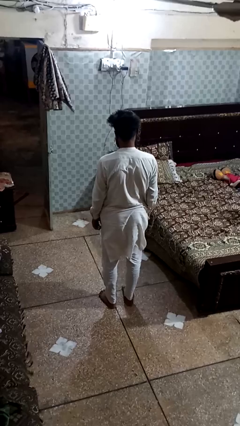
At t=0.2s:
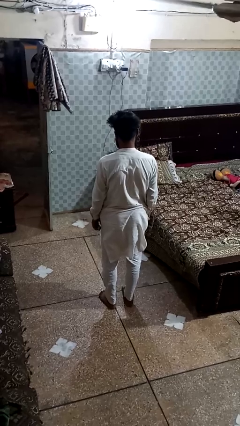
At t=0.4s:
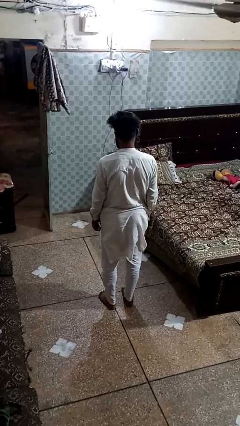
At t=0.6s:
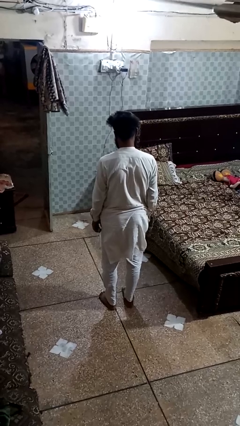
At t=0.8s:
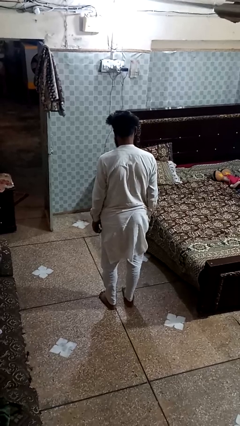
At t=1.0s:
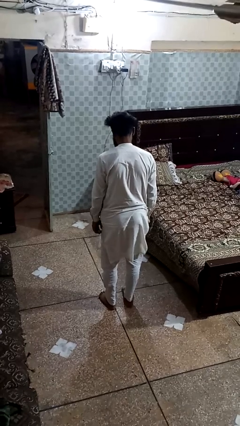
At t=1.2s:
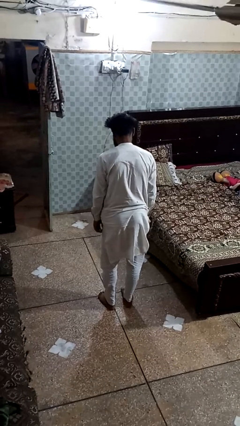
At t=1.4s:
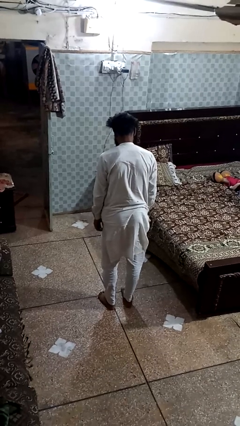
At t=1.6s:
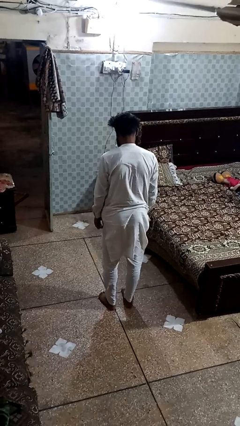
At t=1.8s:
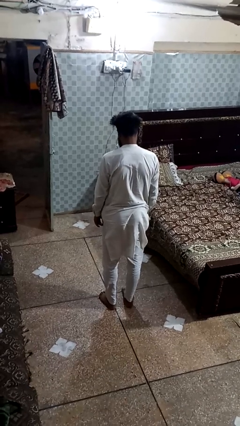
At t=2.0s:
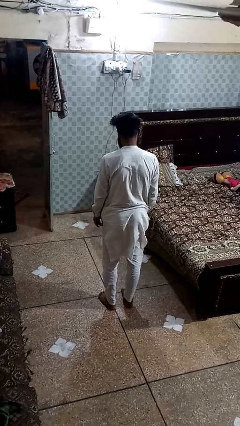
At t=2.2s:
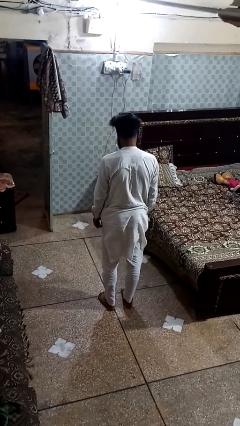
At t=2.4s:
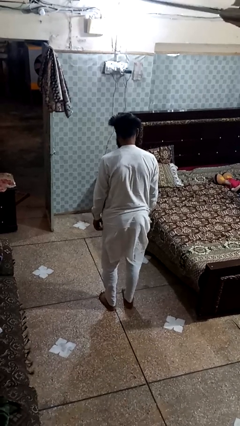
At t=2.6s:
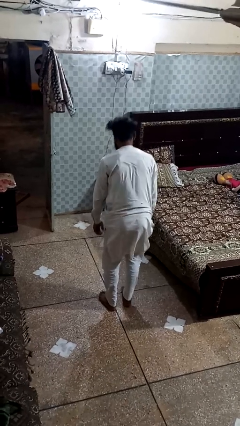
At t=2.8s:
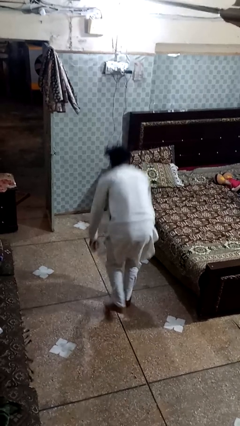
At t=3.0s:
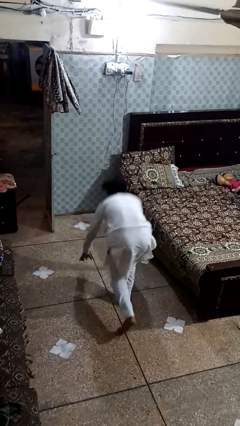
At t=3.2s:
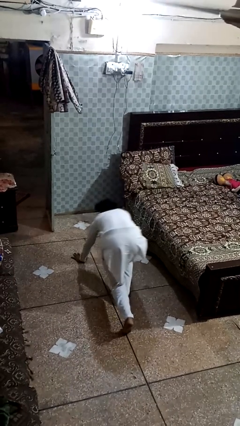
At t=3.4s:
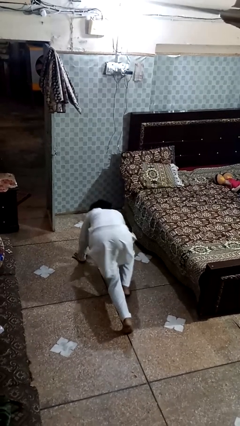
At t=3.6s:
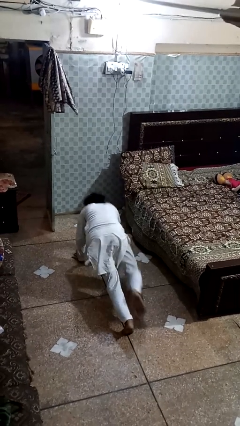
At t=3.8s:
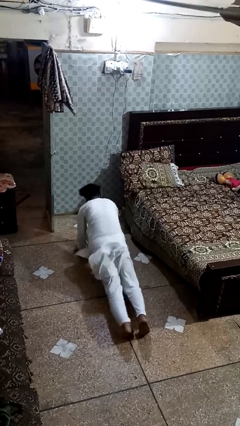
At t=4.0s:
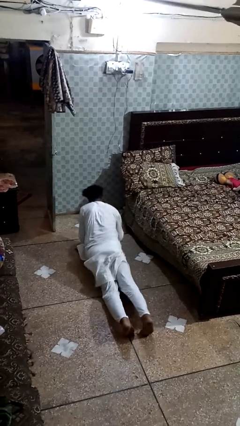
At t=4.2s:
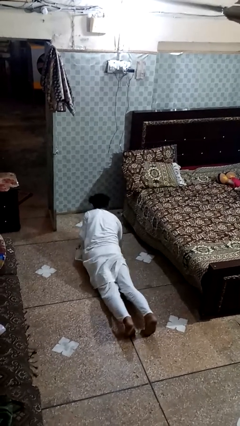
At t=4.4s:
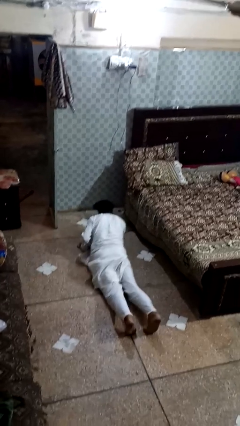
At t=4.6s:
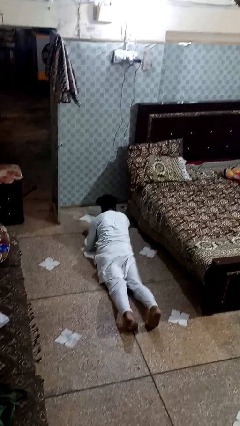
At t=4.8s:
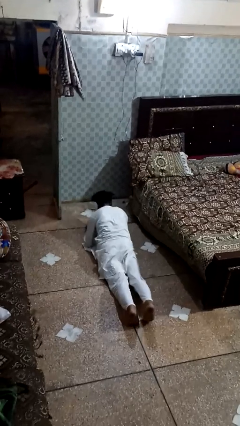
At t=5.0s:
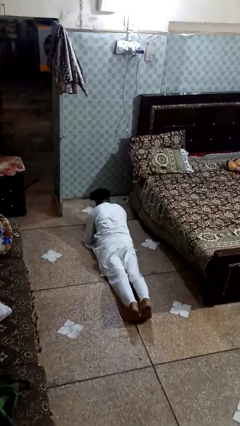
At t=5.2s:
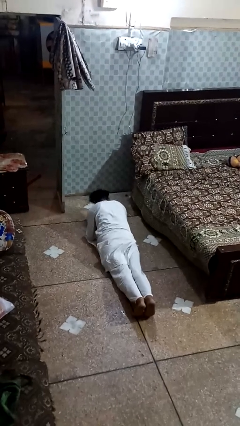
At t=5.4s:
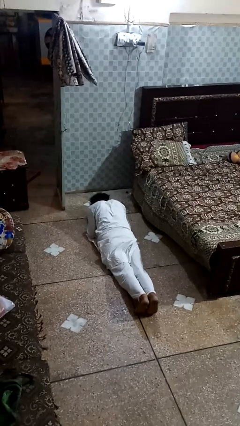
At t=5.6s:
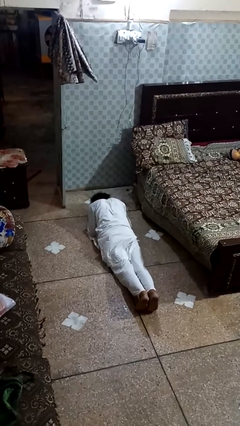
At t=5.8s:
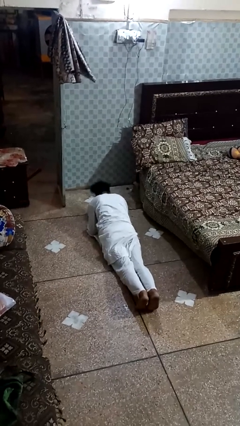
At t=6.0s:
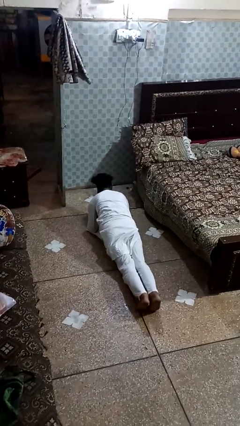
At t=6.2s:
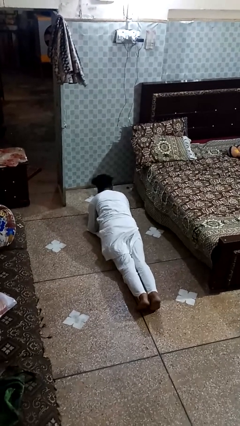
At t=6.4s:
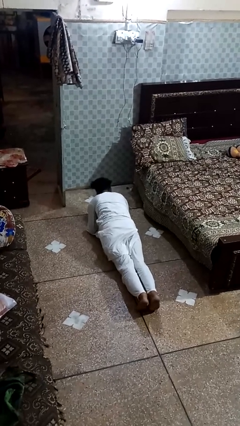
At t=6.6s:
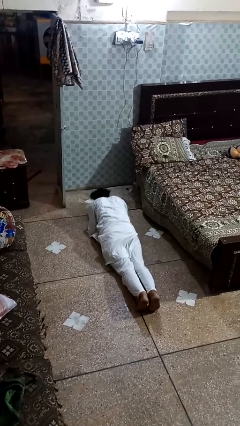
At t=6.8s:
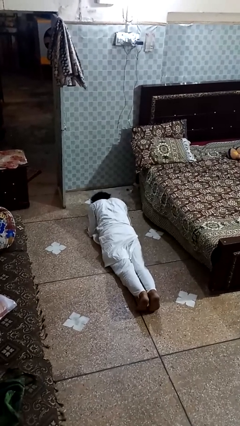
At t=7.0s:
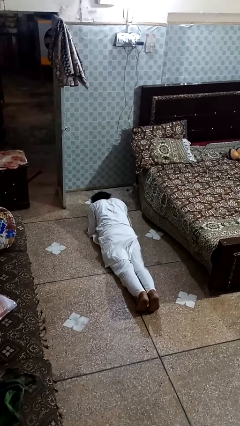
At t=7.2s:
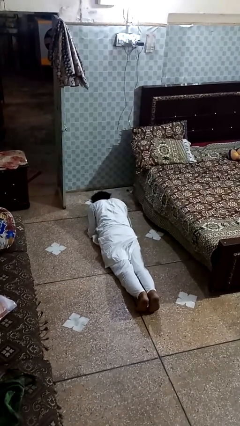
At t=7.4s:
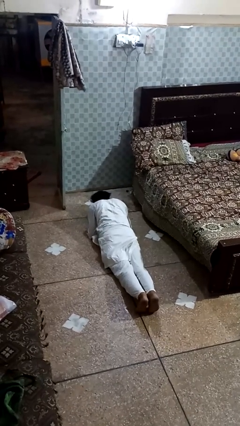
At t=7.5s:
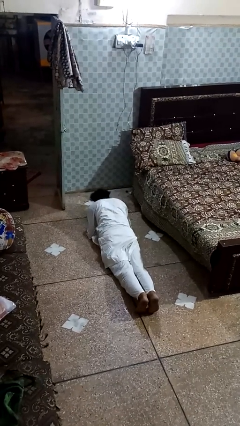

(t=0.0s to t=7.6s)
person stands up from floor

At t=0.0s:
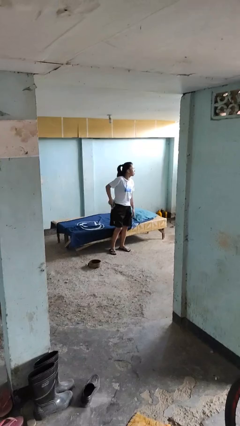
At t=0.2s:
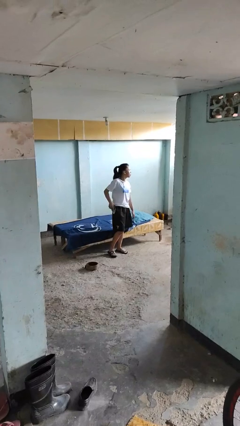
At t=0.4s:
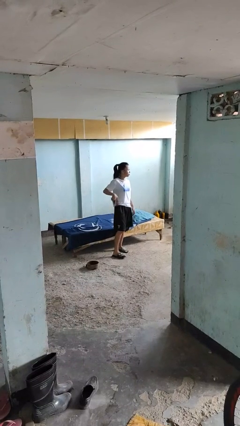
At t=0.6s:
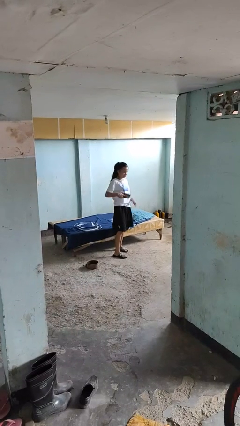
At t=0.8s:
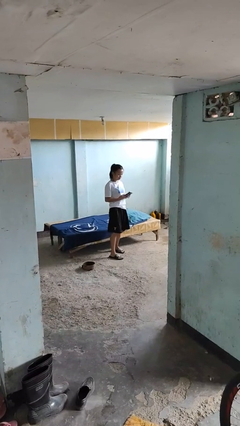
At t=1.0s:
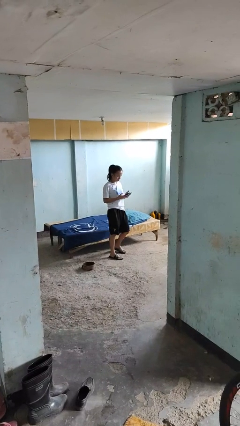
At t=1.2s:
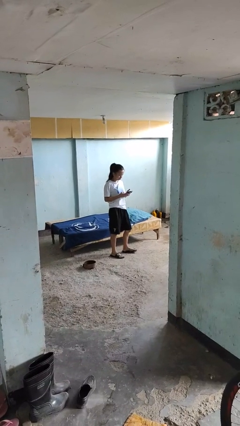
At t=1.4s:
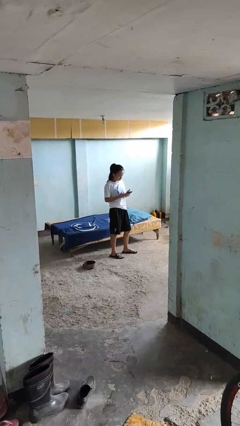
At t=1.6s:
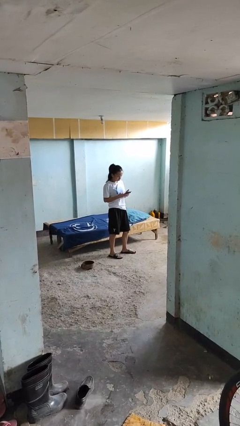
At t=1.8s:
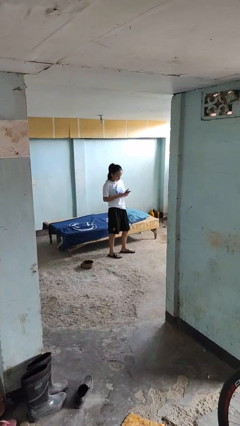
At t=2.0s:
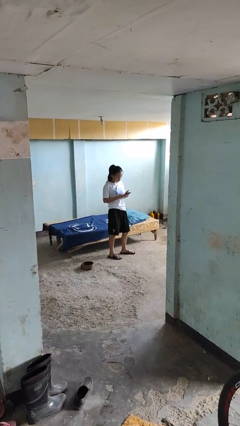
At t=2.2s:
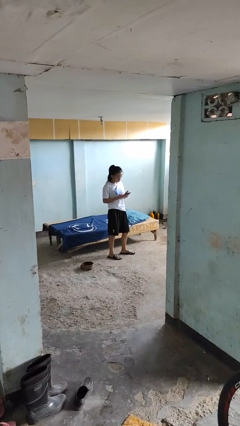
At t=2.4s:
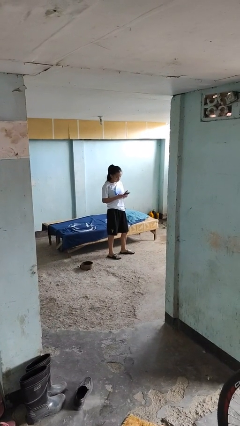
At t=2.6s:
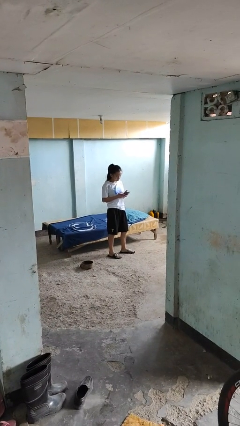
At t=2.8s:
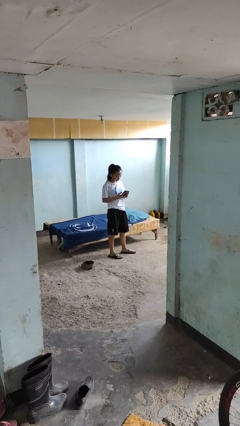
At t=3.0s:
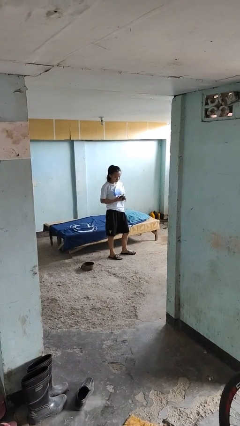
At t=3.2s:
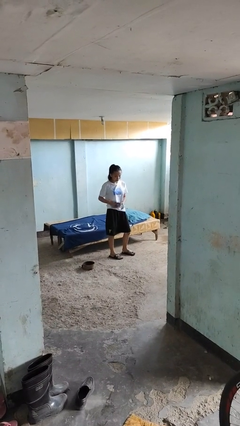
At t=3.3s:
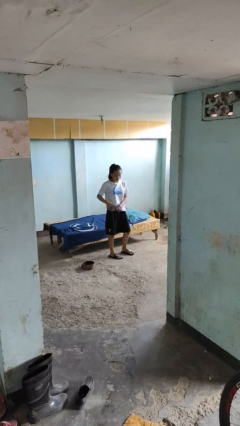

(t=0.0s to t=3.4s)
person takes phone from pocket

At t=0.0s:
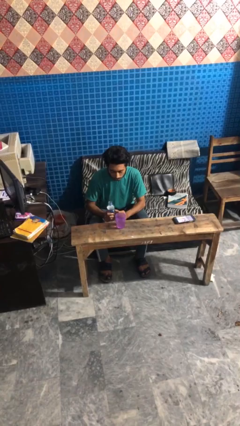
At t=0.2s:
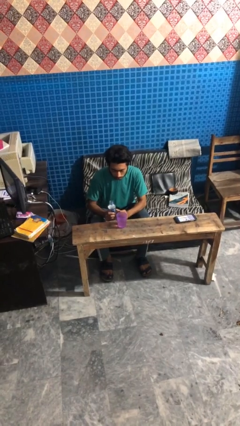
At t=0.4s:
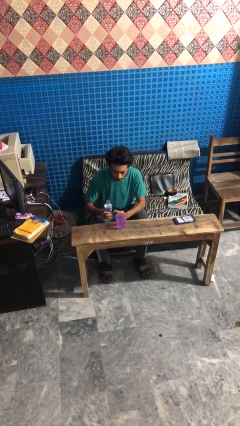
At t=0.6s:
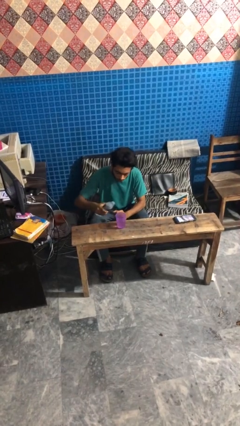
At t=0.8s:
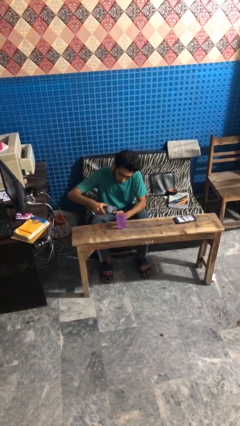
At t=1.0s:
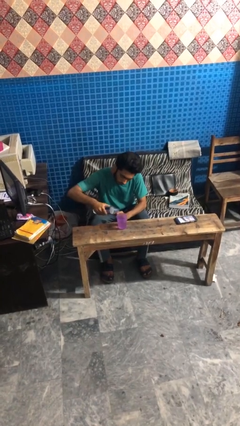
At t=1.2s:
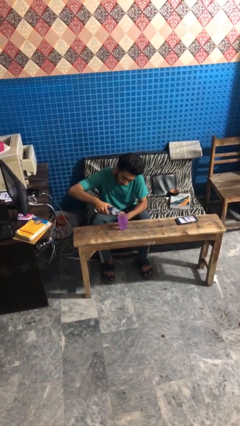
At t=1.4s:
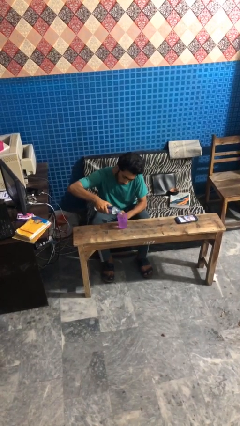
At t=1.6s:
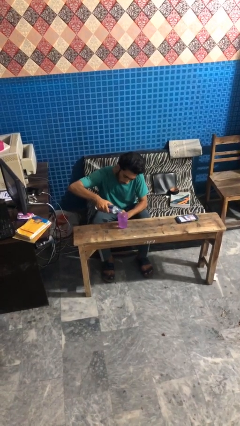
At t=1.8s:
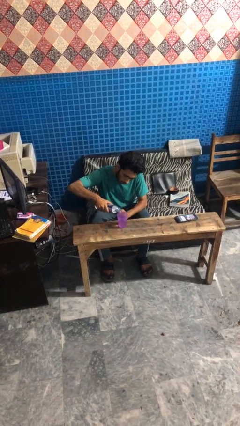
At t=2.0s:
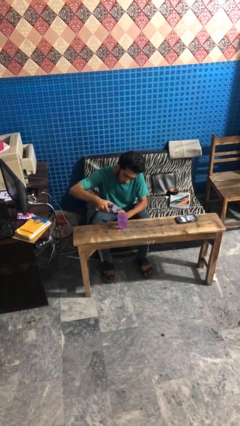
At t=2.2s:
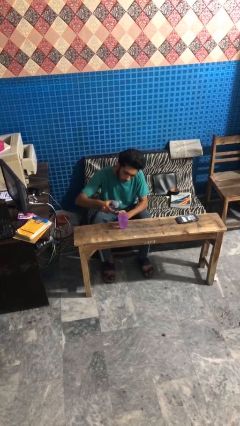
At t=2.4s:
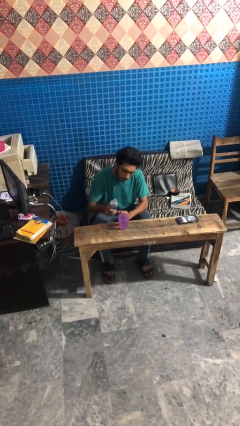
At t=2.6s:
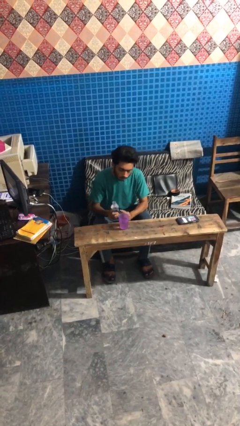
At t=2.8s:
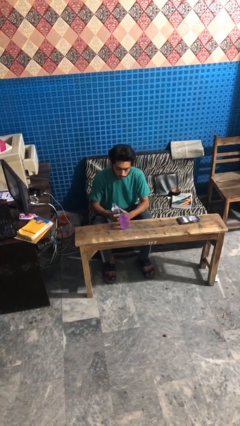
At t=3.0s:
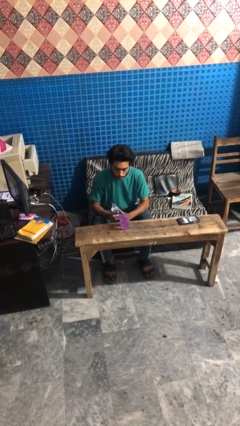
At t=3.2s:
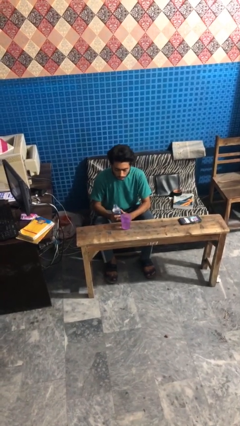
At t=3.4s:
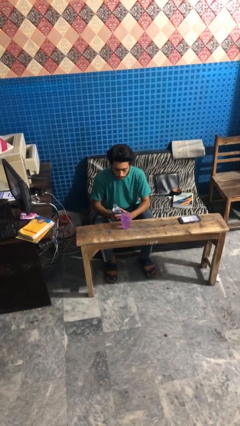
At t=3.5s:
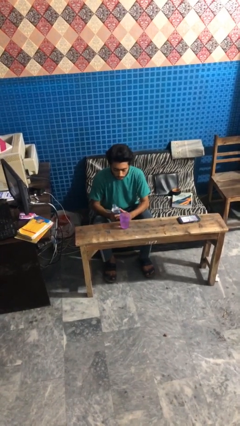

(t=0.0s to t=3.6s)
person pours liquid into cup

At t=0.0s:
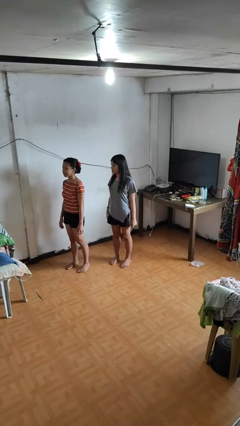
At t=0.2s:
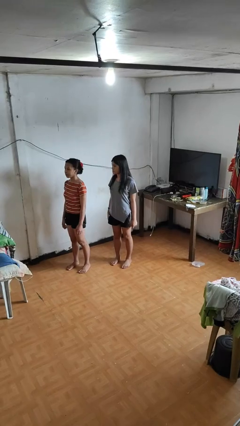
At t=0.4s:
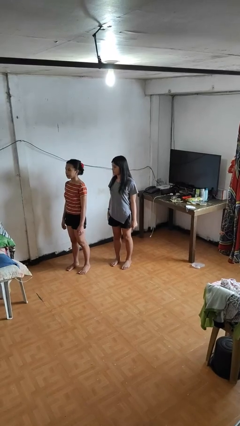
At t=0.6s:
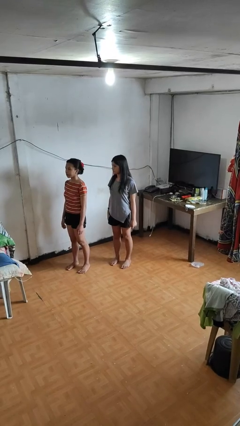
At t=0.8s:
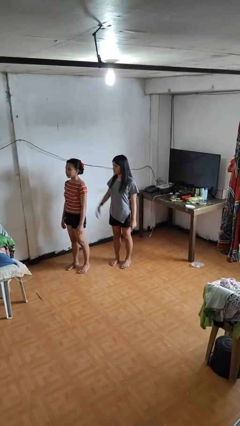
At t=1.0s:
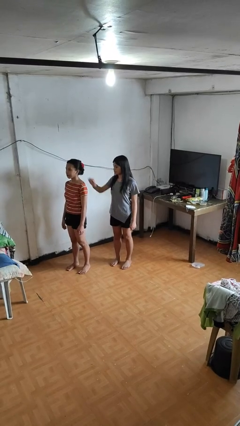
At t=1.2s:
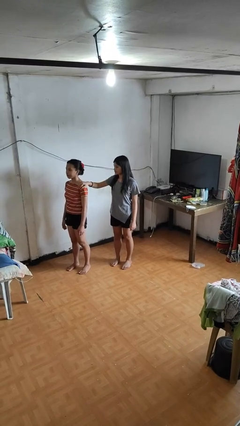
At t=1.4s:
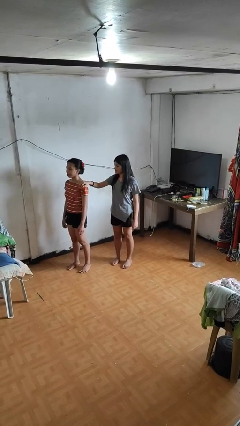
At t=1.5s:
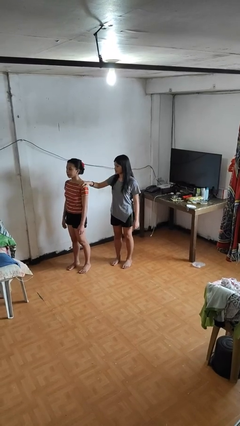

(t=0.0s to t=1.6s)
person grabs person by shoulder

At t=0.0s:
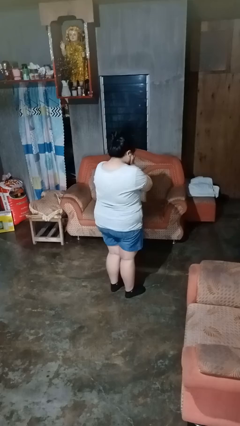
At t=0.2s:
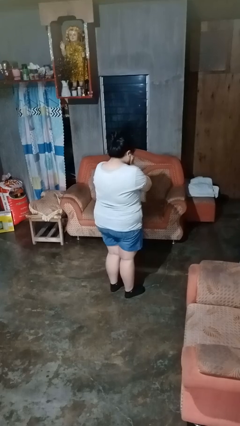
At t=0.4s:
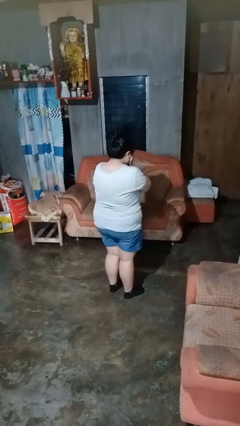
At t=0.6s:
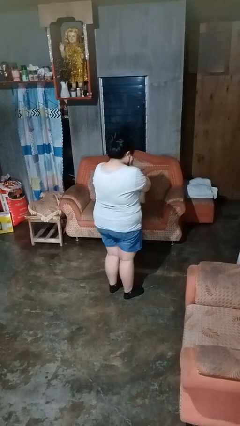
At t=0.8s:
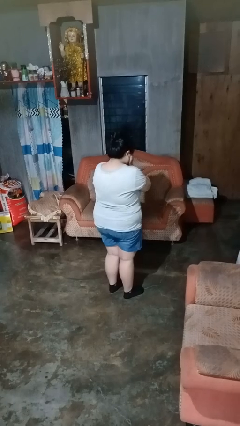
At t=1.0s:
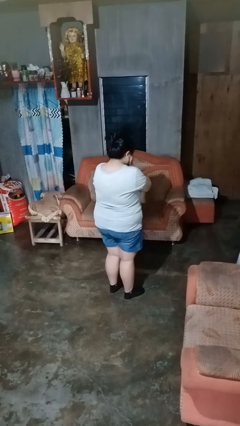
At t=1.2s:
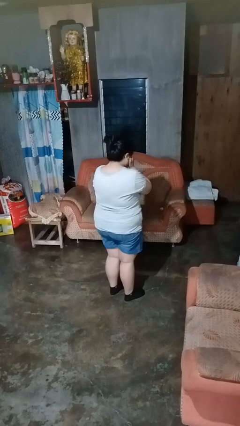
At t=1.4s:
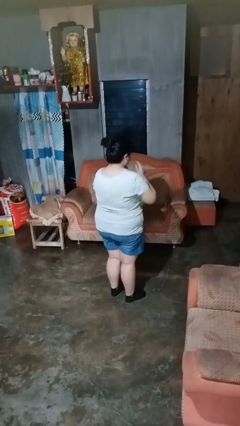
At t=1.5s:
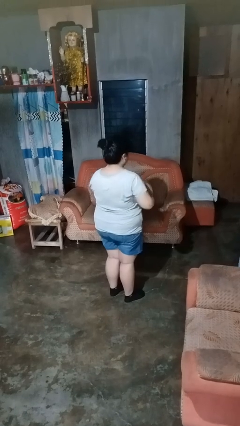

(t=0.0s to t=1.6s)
person covers face with hands
